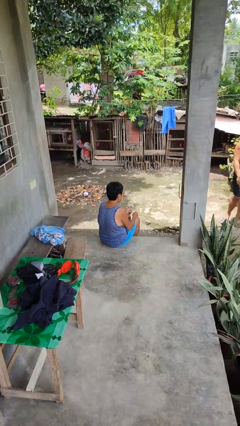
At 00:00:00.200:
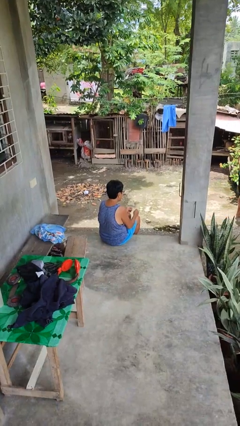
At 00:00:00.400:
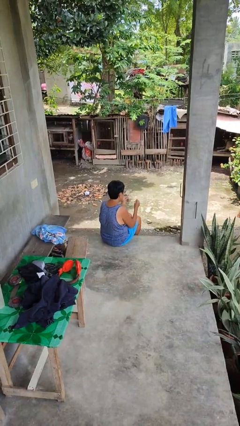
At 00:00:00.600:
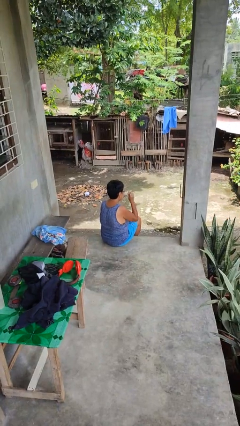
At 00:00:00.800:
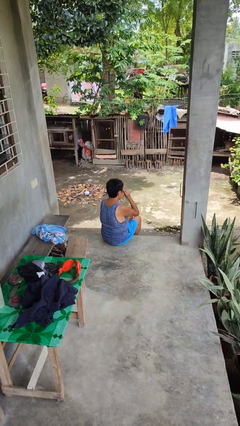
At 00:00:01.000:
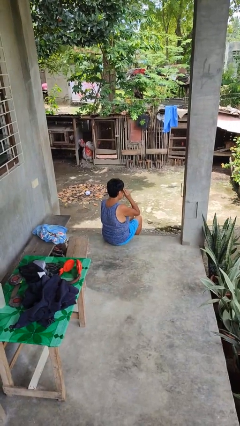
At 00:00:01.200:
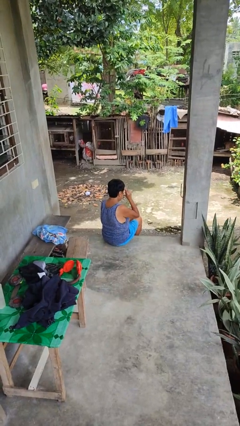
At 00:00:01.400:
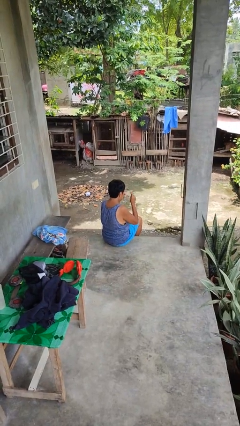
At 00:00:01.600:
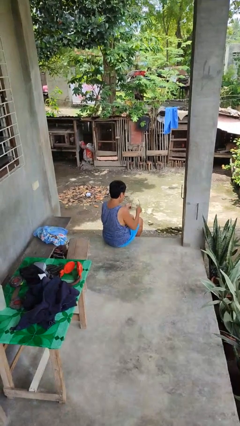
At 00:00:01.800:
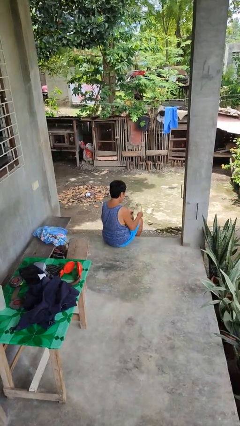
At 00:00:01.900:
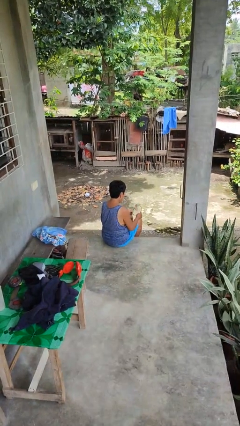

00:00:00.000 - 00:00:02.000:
person takes off glasses

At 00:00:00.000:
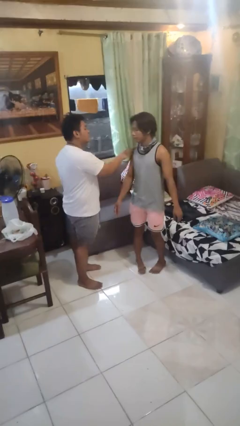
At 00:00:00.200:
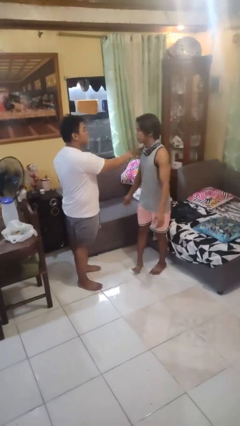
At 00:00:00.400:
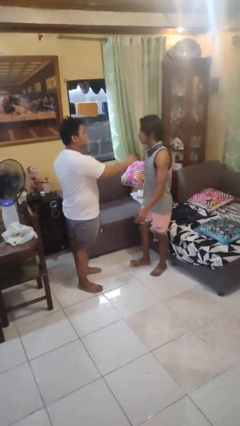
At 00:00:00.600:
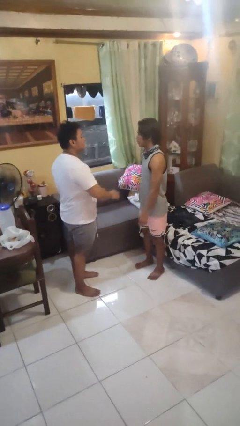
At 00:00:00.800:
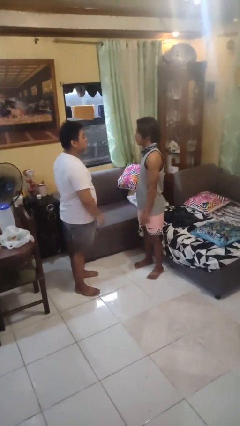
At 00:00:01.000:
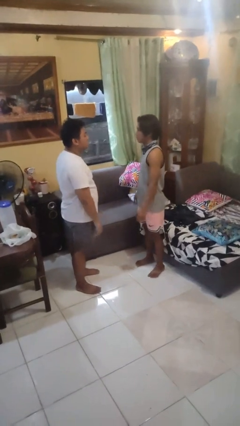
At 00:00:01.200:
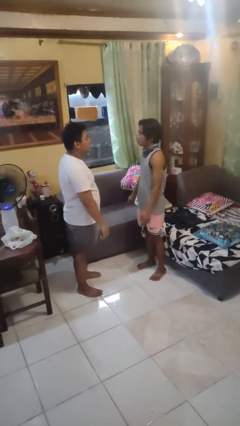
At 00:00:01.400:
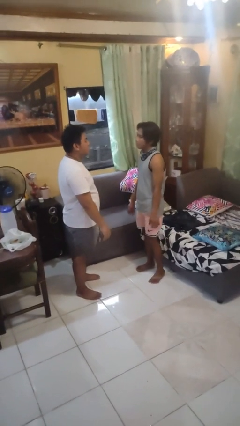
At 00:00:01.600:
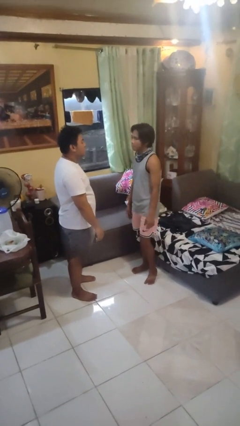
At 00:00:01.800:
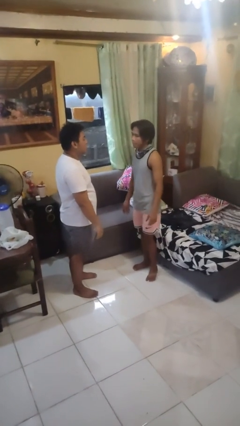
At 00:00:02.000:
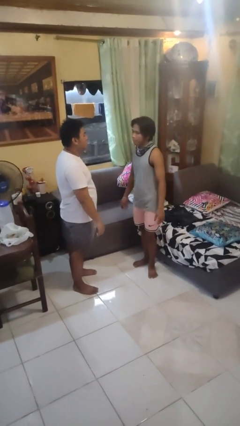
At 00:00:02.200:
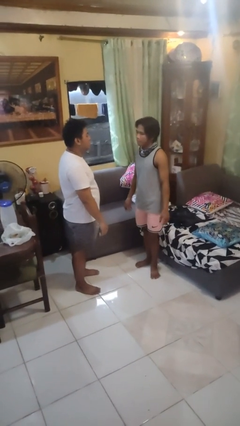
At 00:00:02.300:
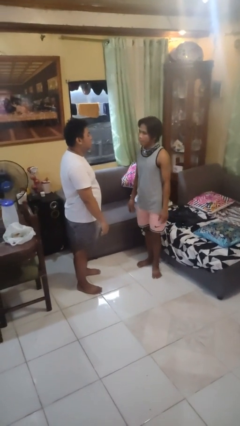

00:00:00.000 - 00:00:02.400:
person spins person around

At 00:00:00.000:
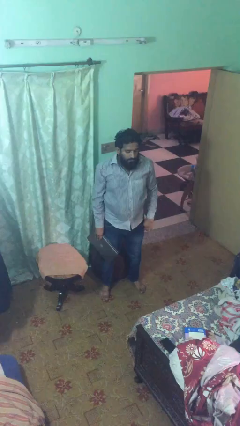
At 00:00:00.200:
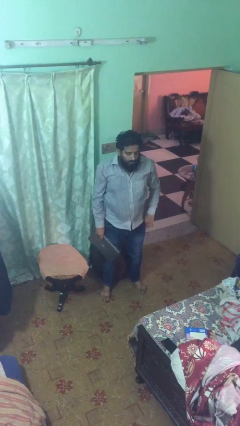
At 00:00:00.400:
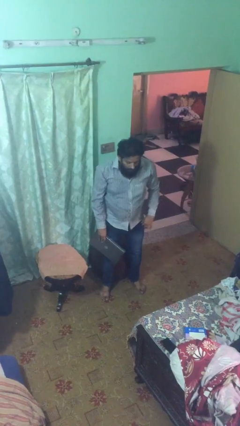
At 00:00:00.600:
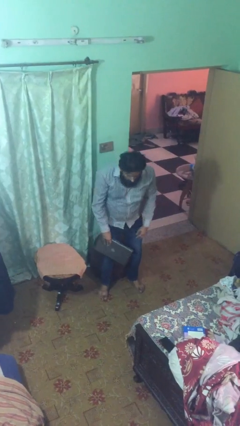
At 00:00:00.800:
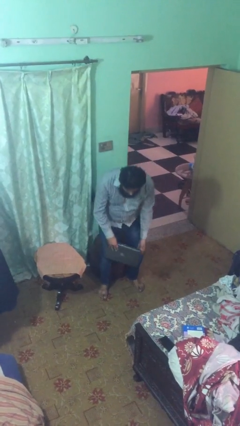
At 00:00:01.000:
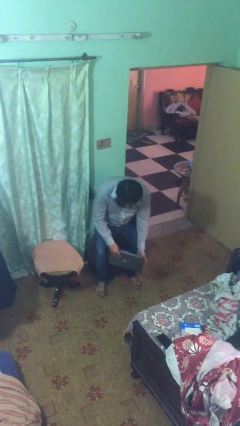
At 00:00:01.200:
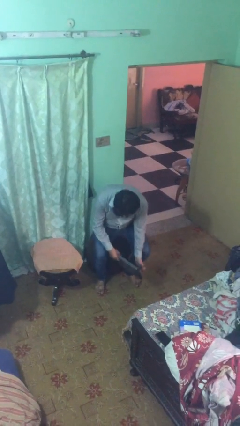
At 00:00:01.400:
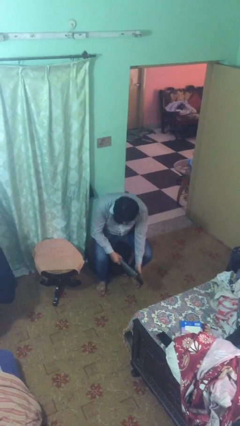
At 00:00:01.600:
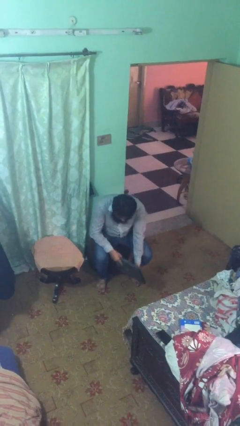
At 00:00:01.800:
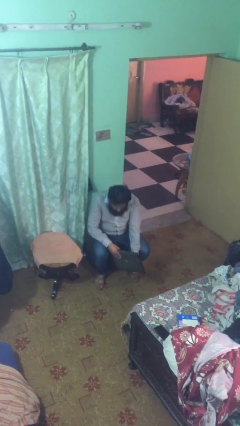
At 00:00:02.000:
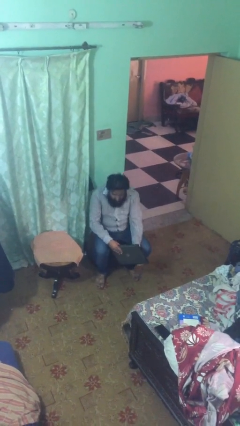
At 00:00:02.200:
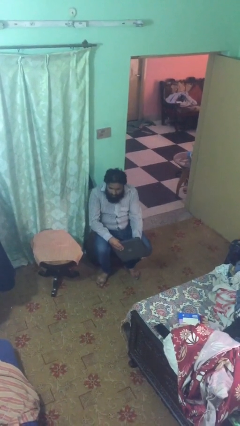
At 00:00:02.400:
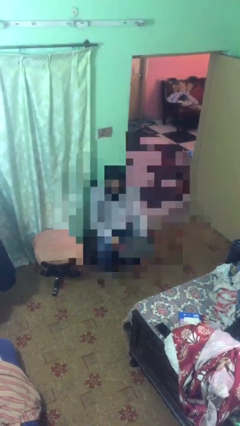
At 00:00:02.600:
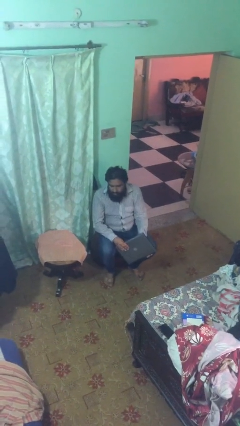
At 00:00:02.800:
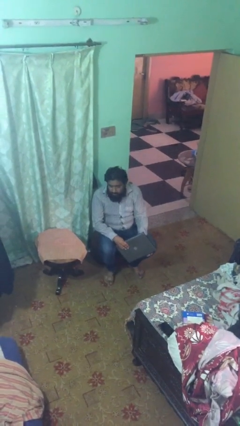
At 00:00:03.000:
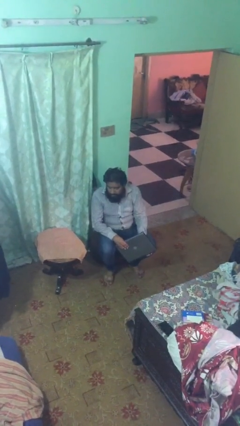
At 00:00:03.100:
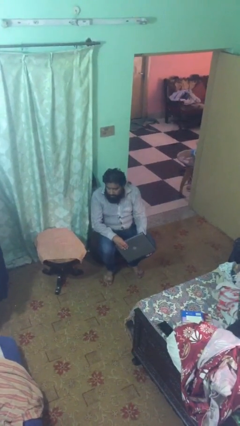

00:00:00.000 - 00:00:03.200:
person sits down

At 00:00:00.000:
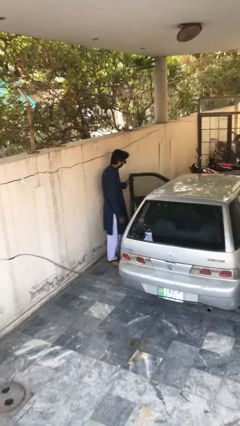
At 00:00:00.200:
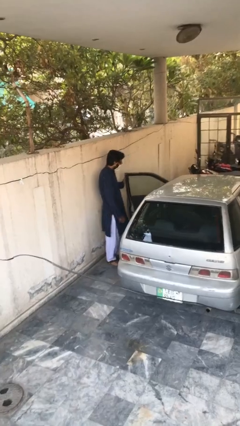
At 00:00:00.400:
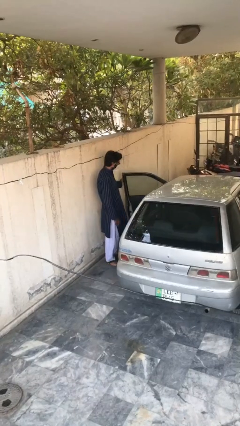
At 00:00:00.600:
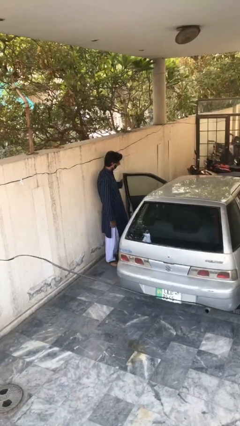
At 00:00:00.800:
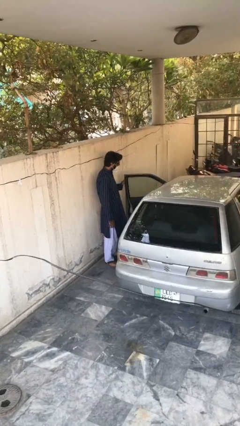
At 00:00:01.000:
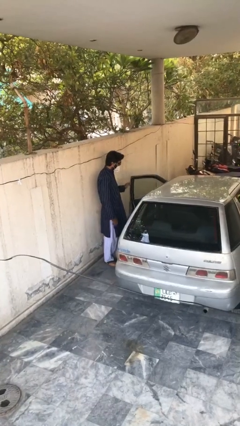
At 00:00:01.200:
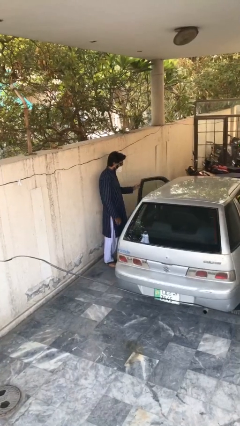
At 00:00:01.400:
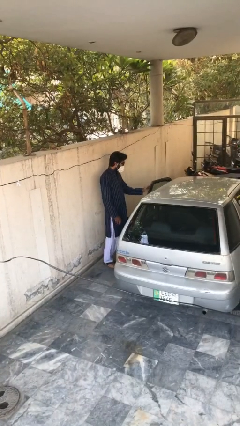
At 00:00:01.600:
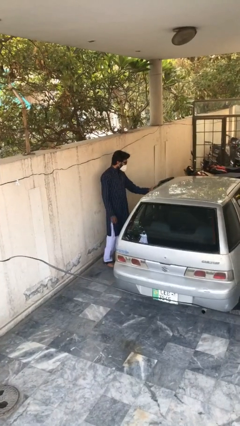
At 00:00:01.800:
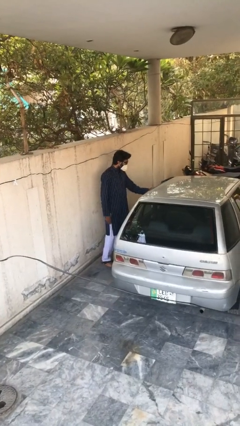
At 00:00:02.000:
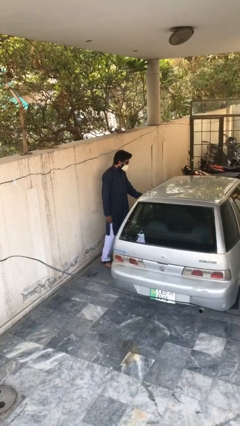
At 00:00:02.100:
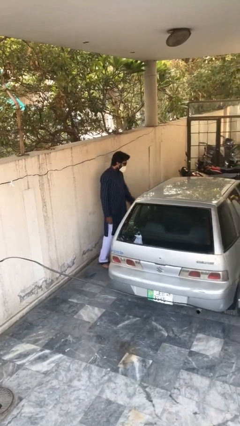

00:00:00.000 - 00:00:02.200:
person closes car door

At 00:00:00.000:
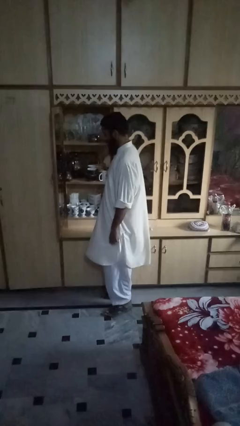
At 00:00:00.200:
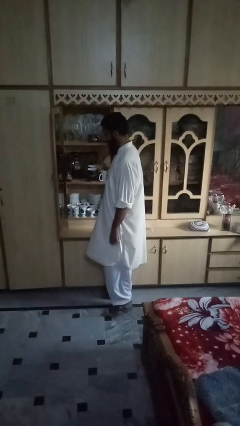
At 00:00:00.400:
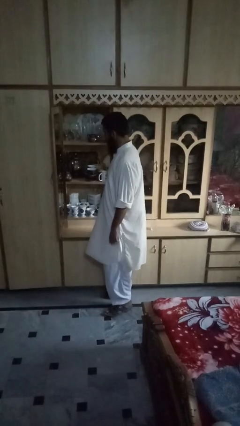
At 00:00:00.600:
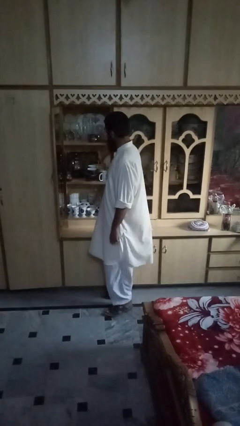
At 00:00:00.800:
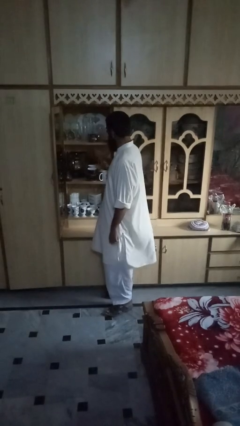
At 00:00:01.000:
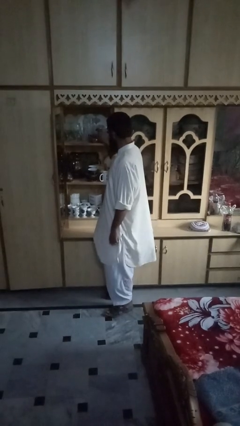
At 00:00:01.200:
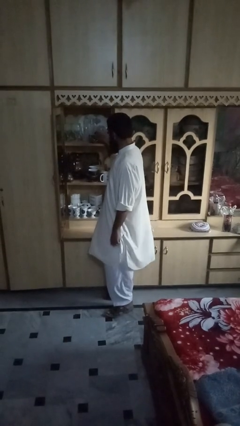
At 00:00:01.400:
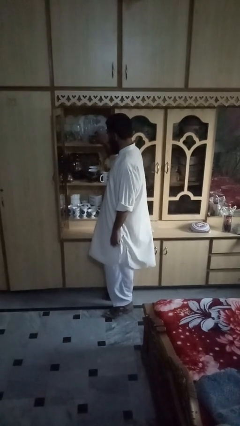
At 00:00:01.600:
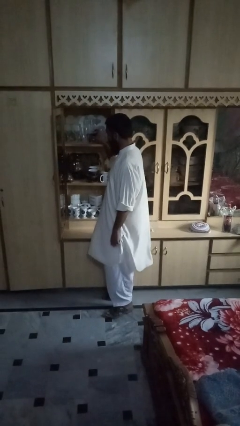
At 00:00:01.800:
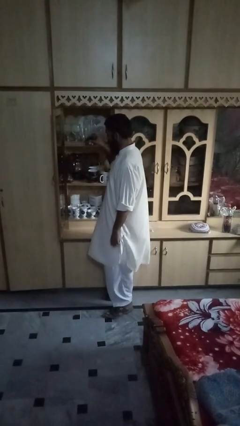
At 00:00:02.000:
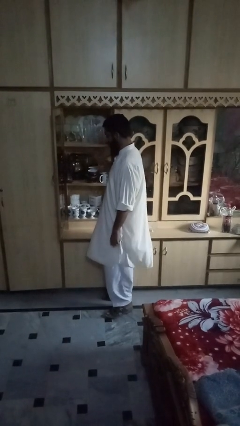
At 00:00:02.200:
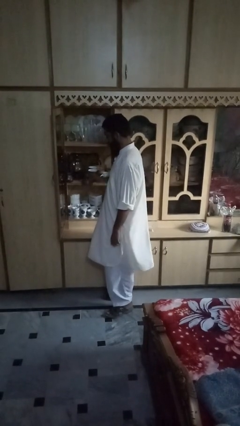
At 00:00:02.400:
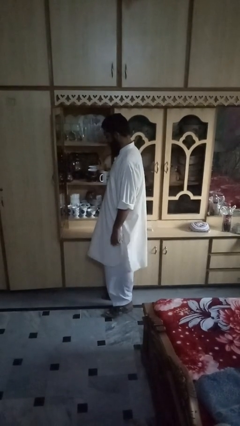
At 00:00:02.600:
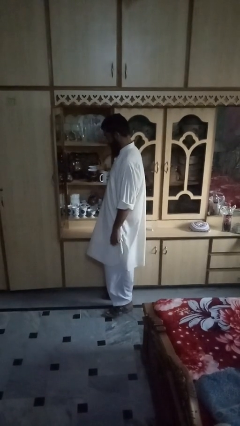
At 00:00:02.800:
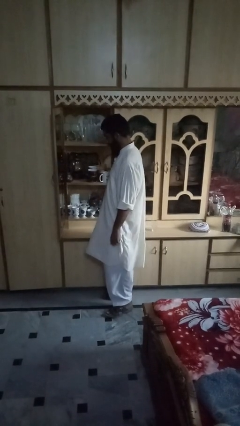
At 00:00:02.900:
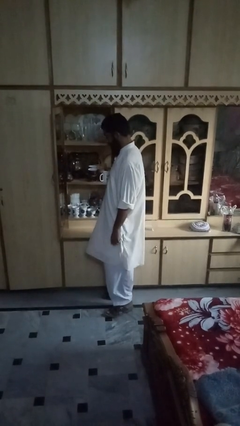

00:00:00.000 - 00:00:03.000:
person picks up object from shelf

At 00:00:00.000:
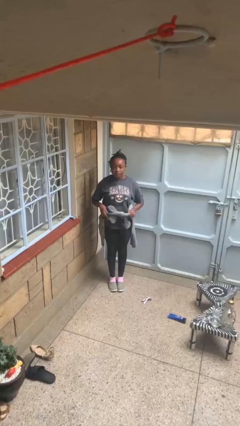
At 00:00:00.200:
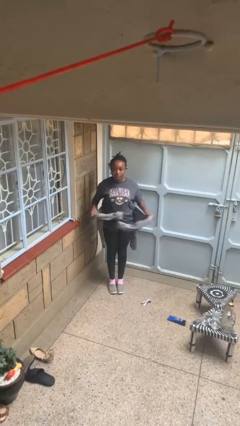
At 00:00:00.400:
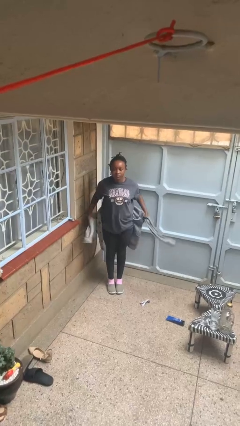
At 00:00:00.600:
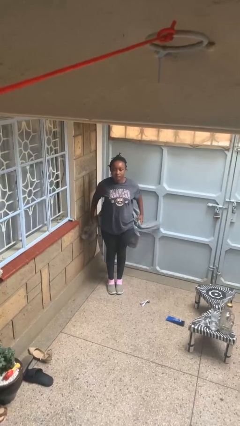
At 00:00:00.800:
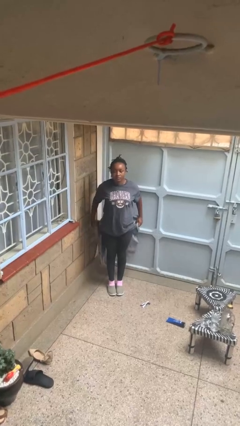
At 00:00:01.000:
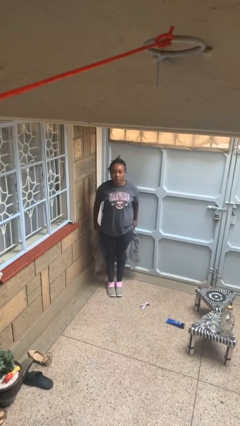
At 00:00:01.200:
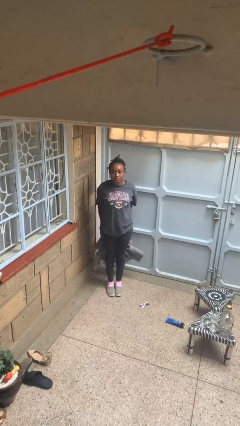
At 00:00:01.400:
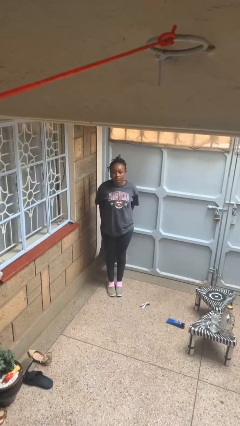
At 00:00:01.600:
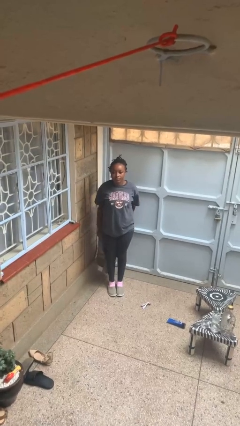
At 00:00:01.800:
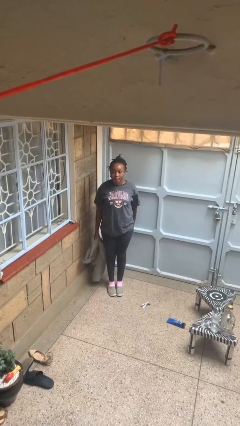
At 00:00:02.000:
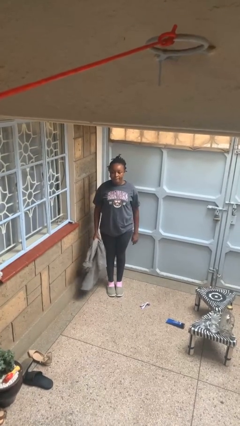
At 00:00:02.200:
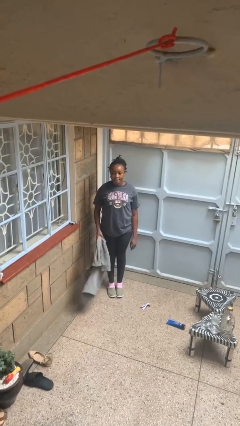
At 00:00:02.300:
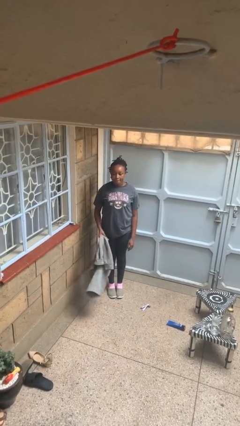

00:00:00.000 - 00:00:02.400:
person unties jacket around waist

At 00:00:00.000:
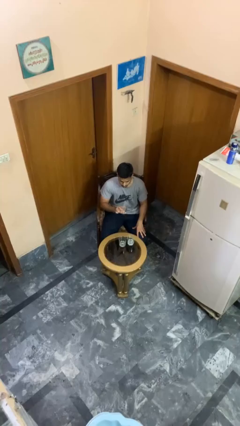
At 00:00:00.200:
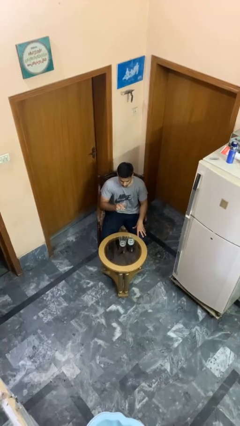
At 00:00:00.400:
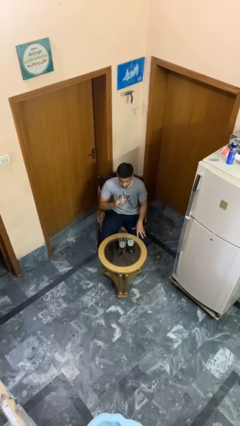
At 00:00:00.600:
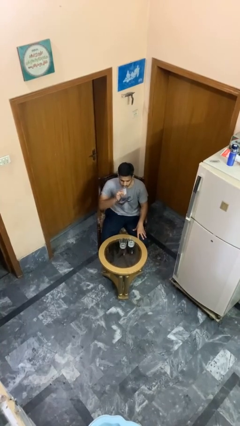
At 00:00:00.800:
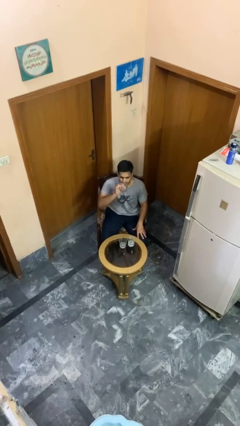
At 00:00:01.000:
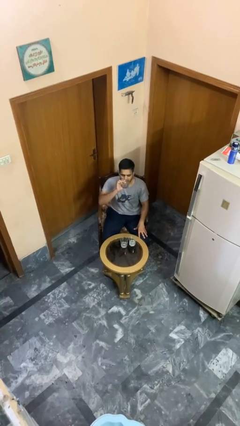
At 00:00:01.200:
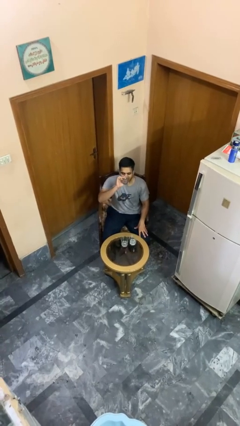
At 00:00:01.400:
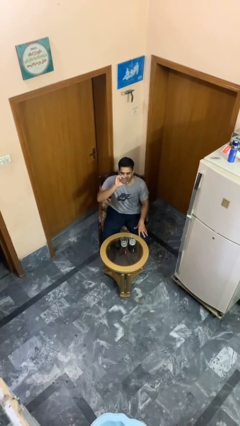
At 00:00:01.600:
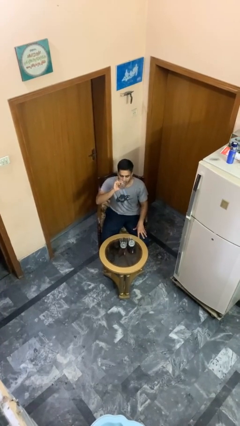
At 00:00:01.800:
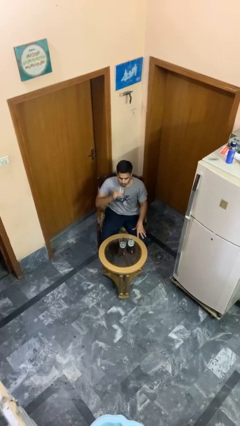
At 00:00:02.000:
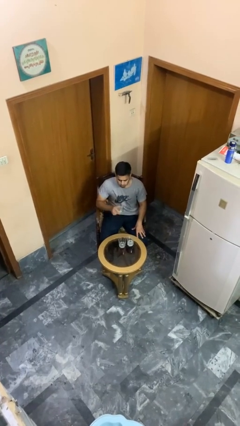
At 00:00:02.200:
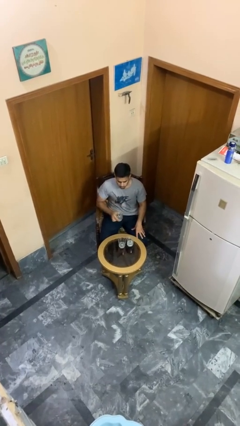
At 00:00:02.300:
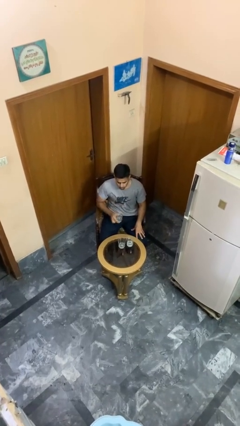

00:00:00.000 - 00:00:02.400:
person drinks from shotglass
